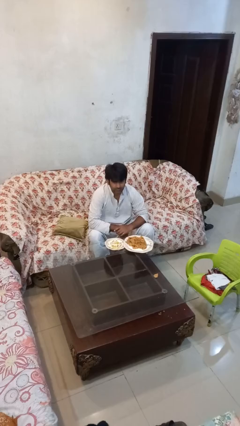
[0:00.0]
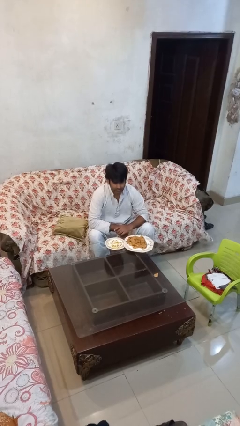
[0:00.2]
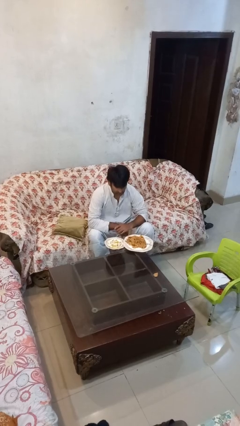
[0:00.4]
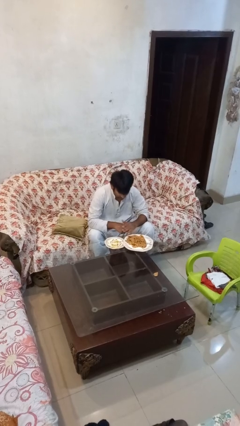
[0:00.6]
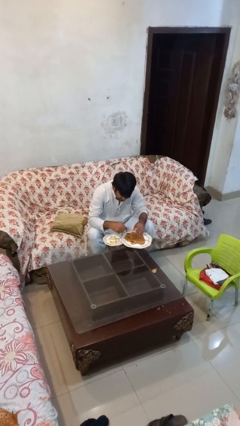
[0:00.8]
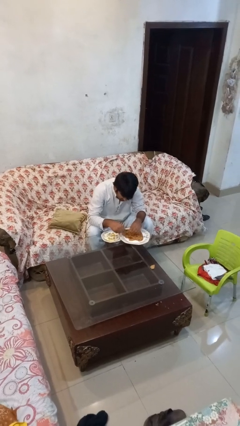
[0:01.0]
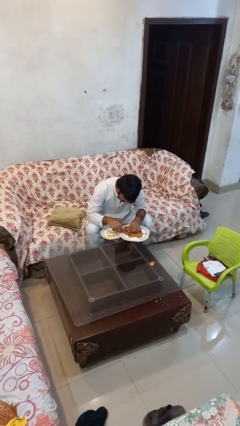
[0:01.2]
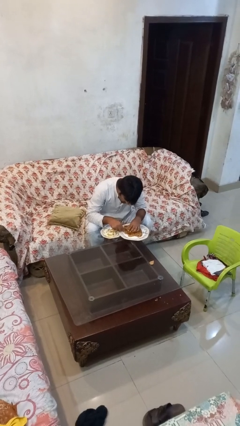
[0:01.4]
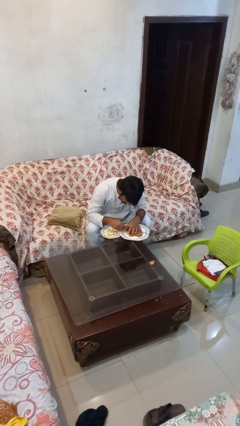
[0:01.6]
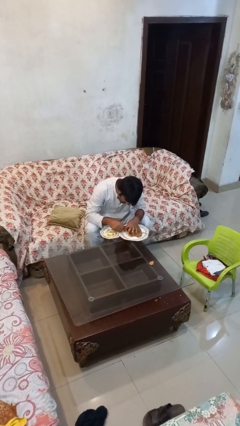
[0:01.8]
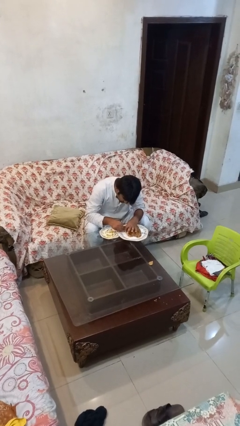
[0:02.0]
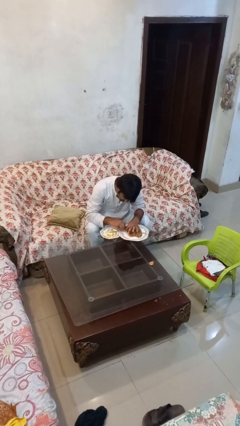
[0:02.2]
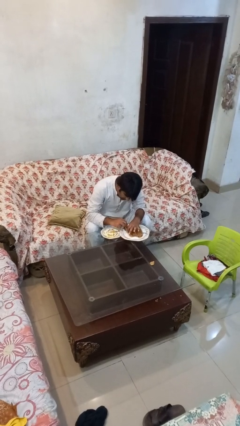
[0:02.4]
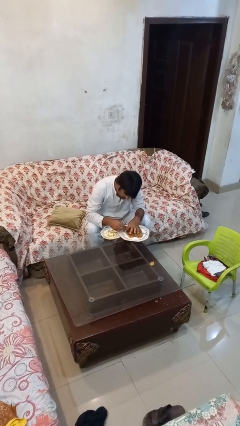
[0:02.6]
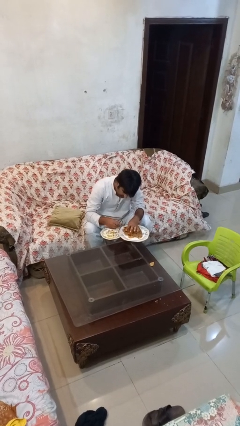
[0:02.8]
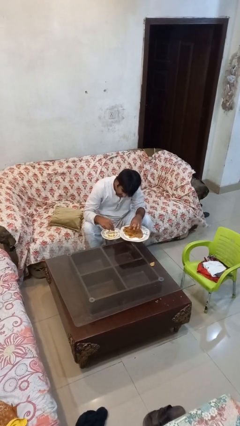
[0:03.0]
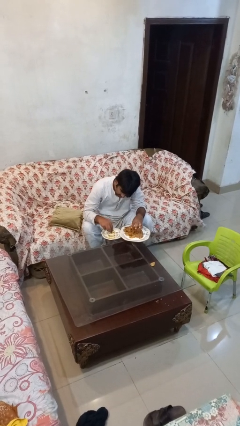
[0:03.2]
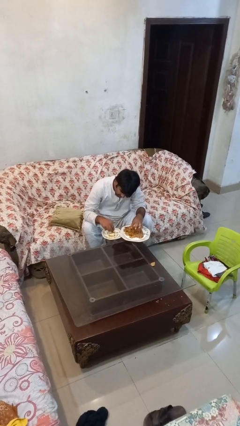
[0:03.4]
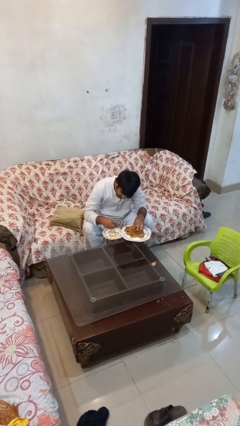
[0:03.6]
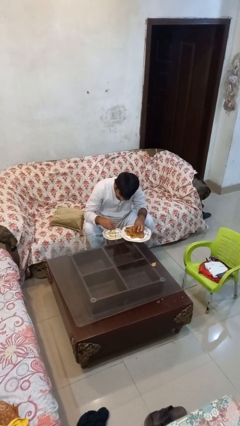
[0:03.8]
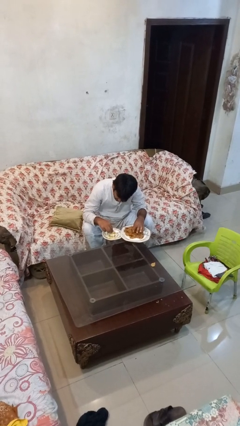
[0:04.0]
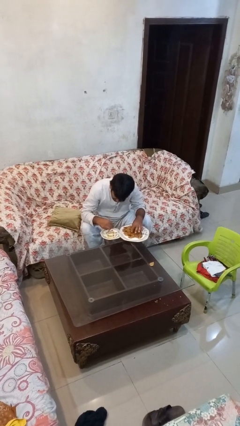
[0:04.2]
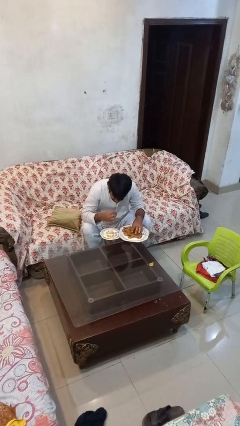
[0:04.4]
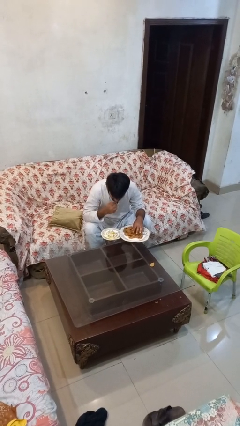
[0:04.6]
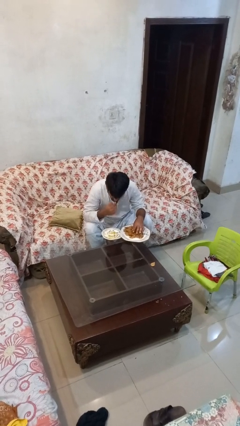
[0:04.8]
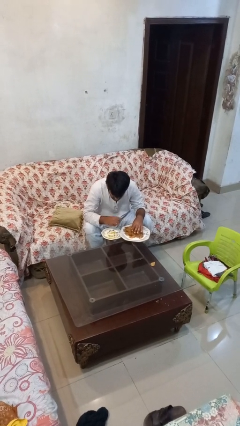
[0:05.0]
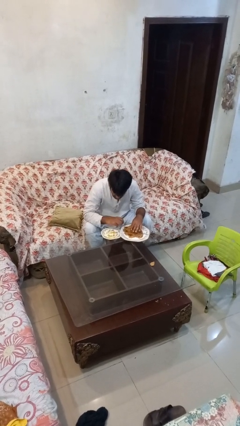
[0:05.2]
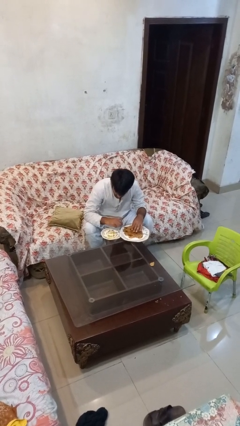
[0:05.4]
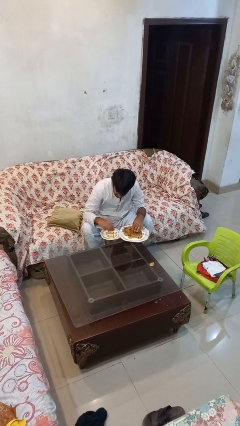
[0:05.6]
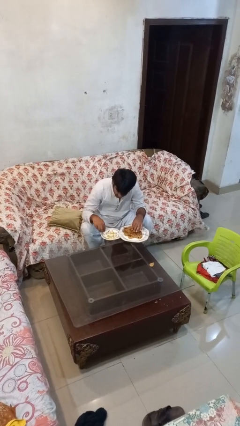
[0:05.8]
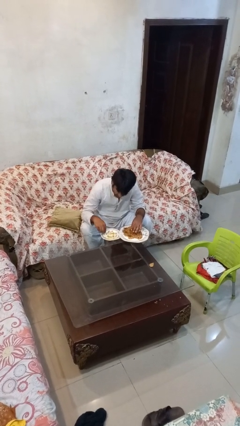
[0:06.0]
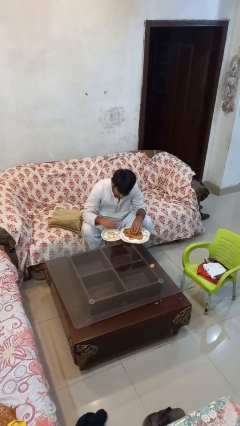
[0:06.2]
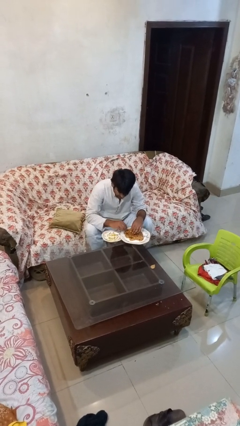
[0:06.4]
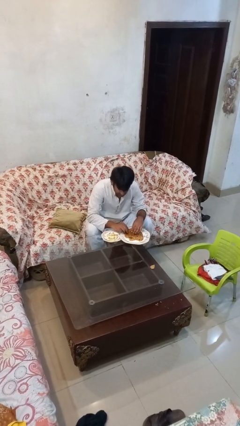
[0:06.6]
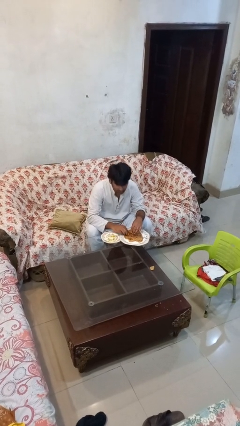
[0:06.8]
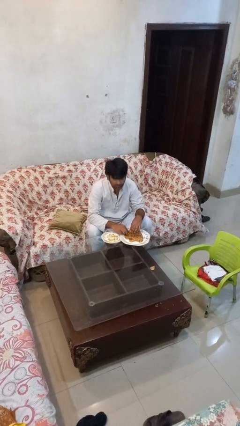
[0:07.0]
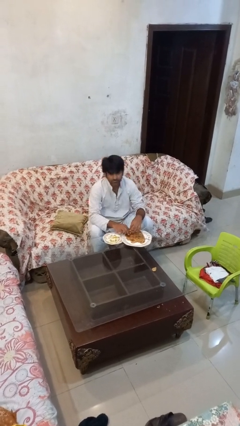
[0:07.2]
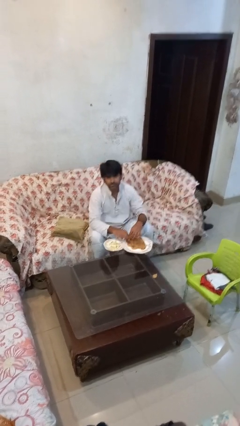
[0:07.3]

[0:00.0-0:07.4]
person eats with hands

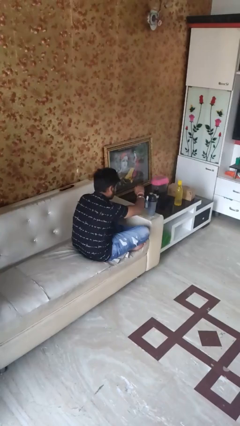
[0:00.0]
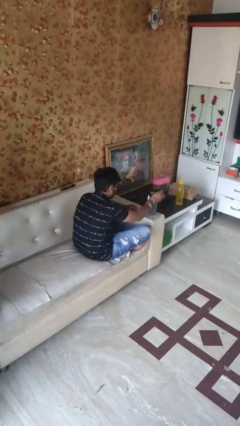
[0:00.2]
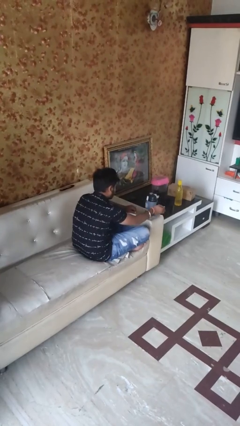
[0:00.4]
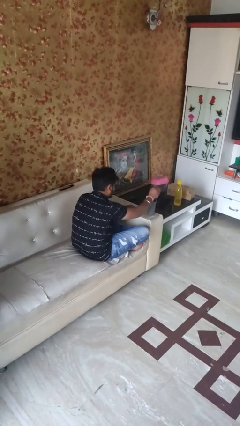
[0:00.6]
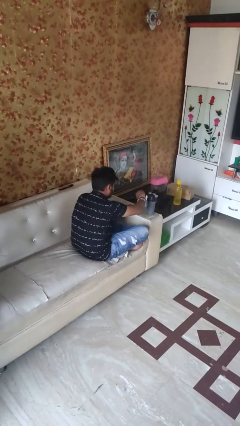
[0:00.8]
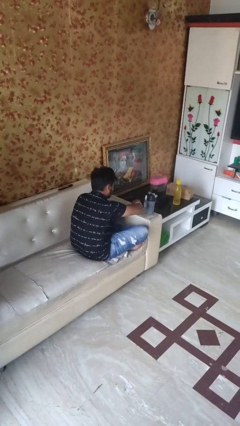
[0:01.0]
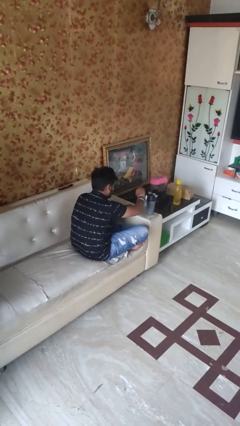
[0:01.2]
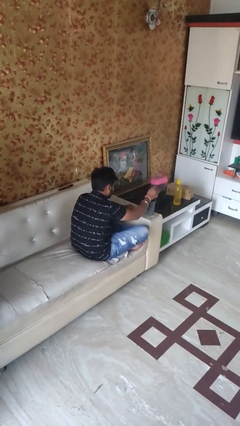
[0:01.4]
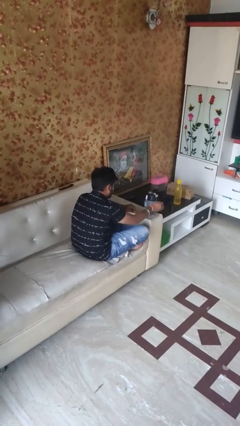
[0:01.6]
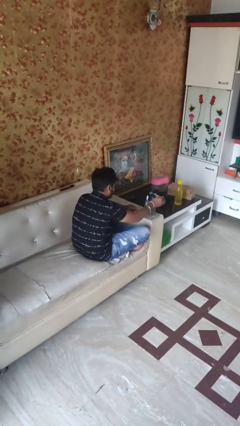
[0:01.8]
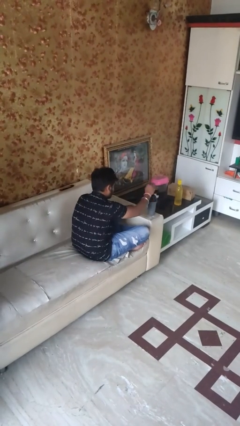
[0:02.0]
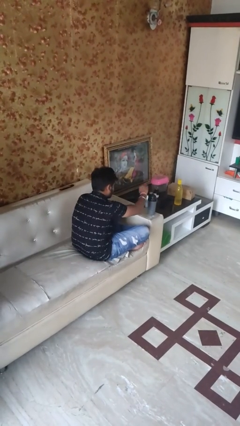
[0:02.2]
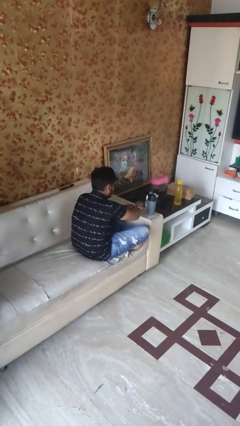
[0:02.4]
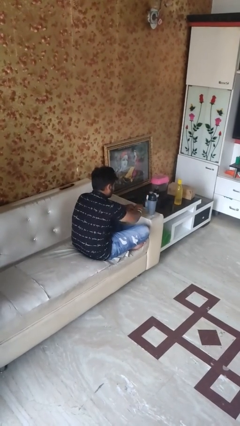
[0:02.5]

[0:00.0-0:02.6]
person waves hand over object

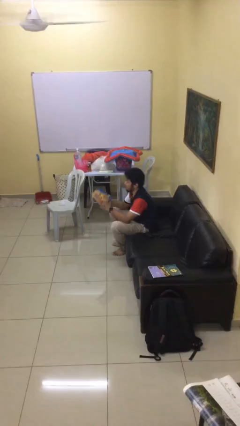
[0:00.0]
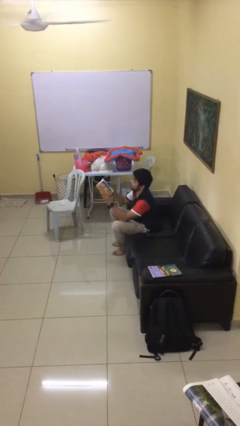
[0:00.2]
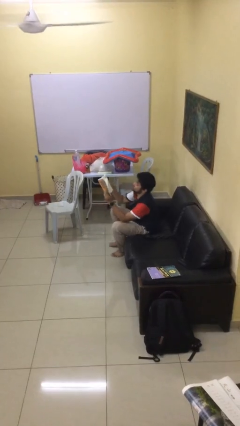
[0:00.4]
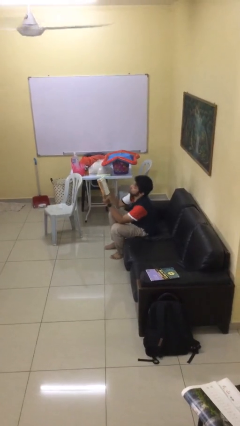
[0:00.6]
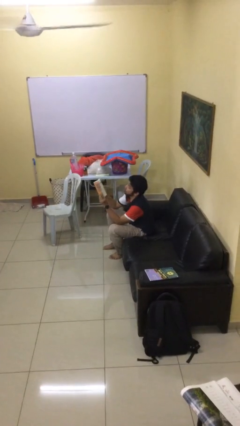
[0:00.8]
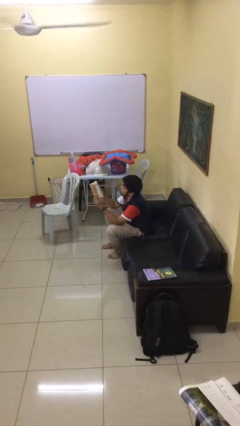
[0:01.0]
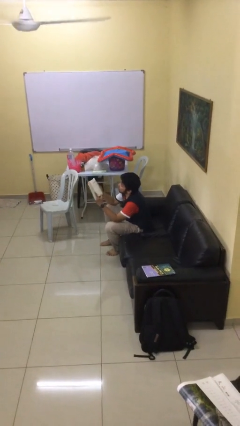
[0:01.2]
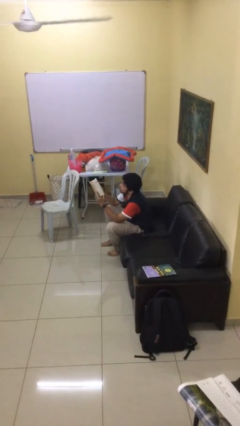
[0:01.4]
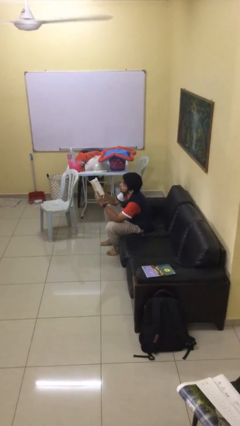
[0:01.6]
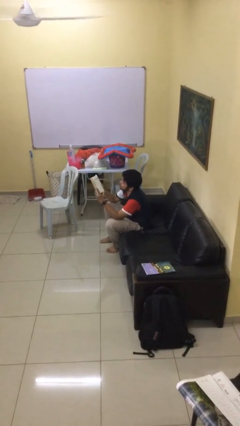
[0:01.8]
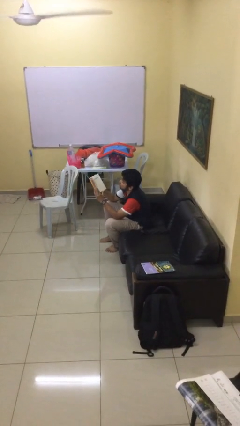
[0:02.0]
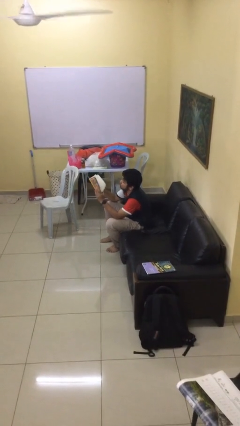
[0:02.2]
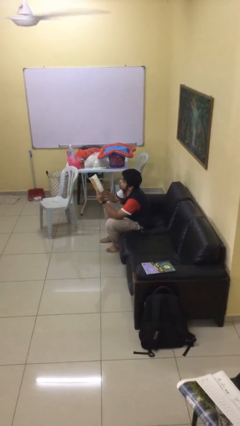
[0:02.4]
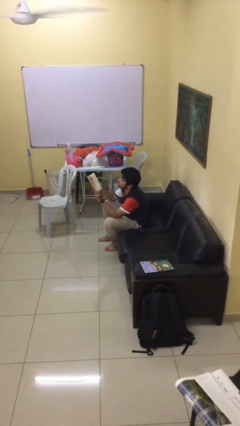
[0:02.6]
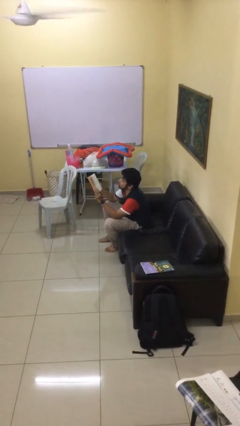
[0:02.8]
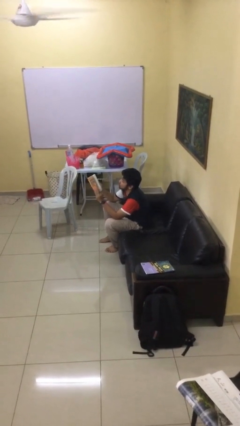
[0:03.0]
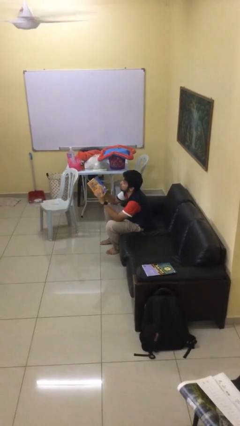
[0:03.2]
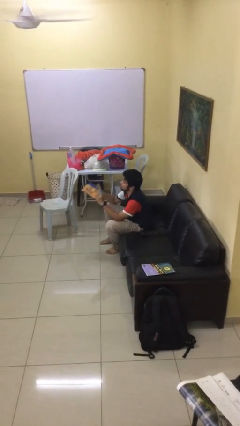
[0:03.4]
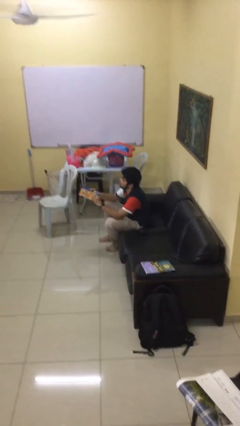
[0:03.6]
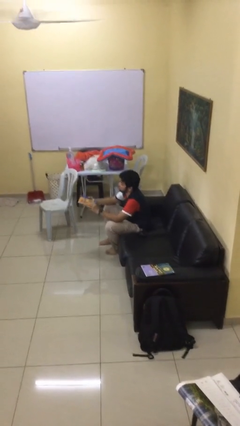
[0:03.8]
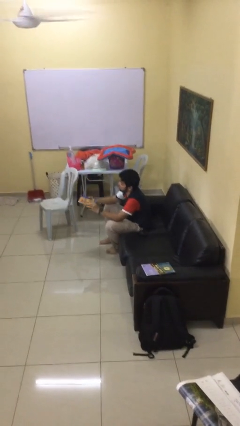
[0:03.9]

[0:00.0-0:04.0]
person reads book

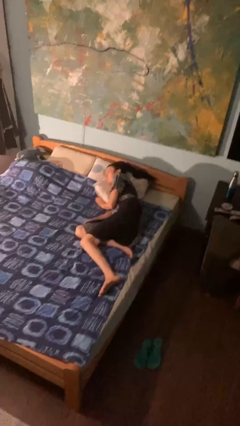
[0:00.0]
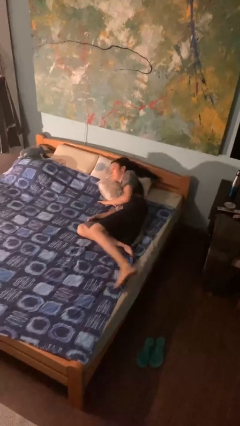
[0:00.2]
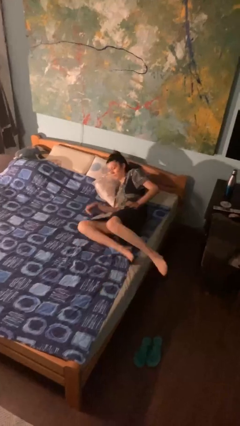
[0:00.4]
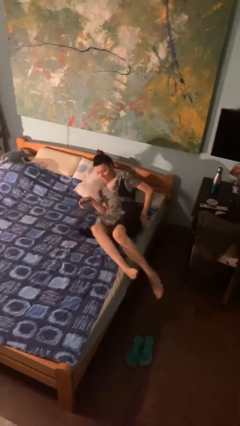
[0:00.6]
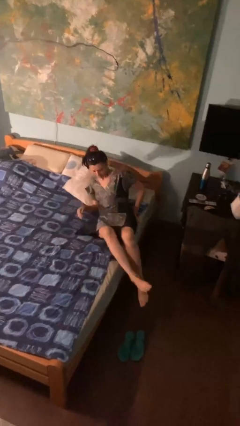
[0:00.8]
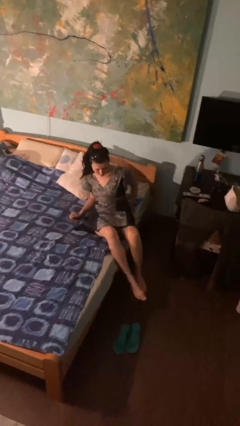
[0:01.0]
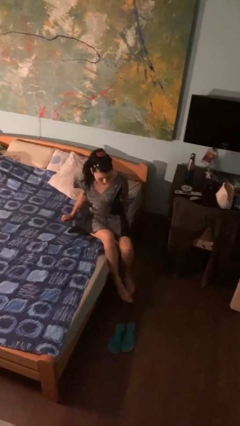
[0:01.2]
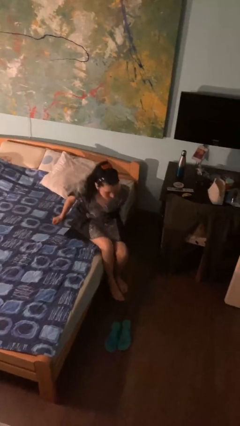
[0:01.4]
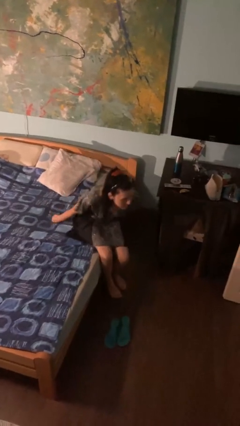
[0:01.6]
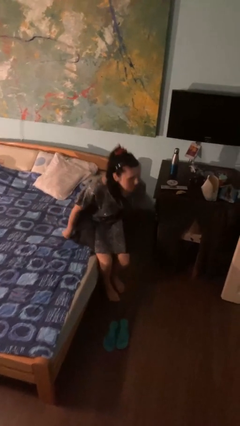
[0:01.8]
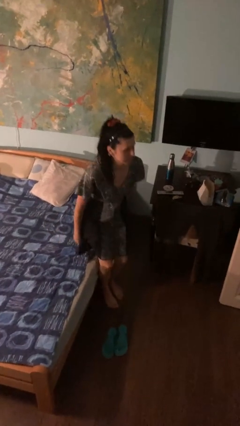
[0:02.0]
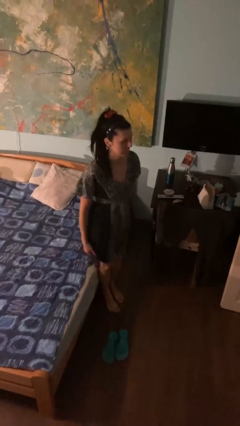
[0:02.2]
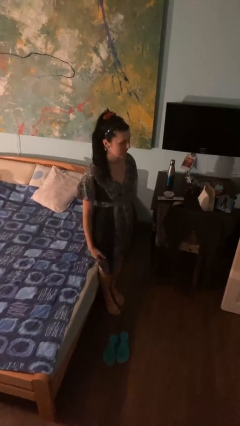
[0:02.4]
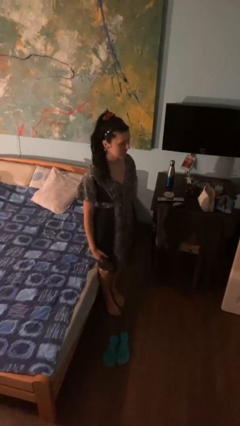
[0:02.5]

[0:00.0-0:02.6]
person stands up

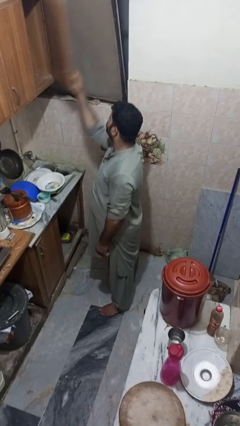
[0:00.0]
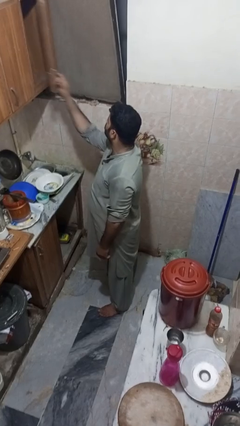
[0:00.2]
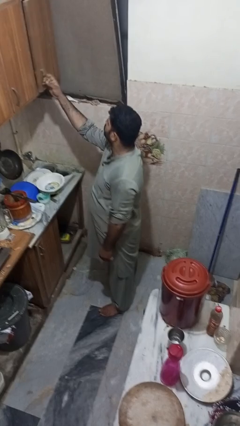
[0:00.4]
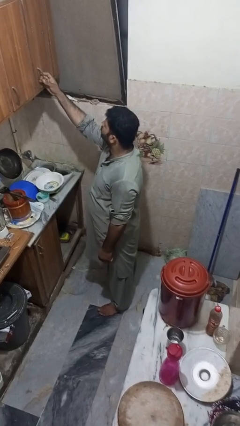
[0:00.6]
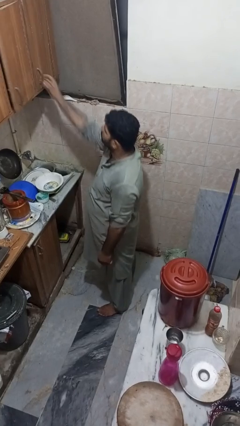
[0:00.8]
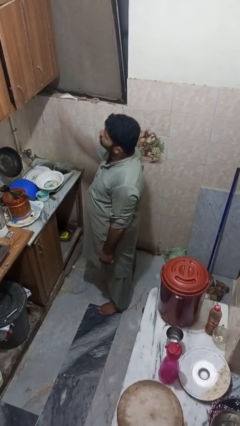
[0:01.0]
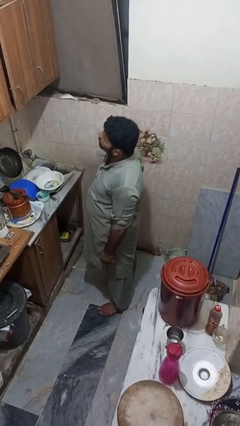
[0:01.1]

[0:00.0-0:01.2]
person closes cabinet
